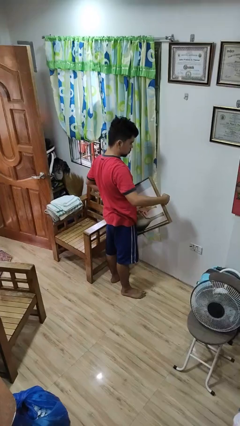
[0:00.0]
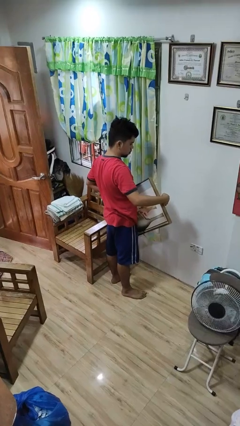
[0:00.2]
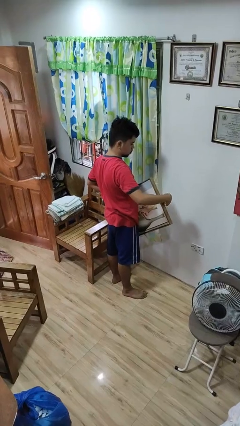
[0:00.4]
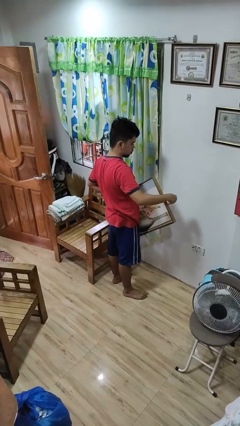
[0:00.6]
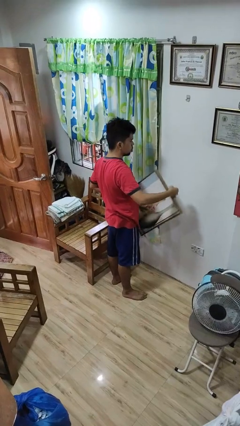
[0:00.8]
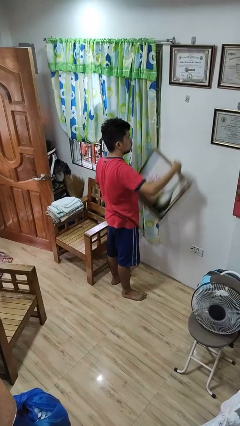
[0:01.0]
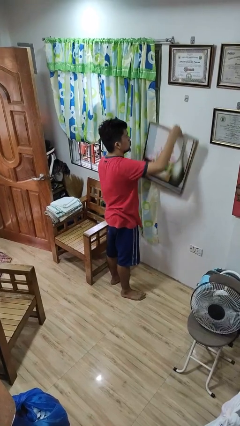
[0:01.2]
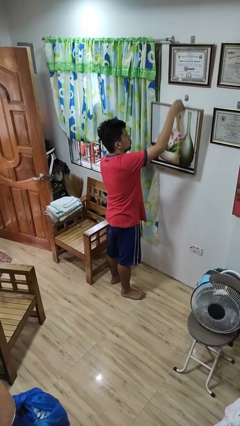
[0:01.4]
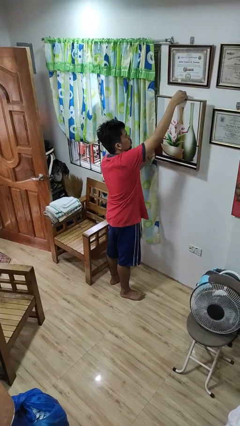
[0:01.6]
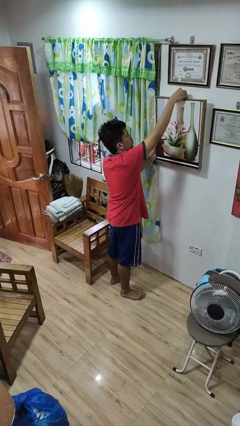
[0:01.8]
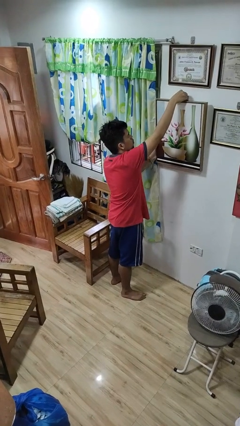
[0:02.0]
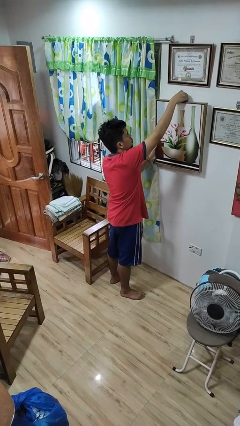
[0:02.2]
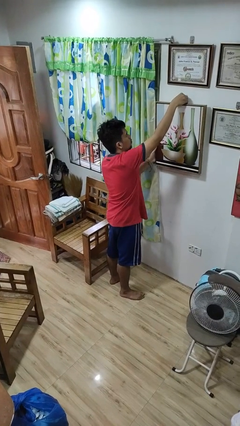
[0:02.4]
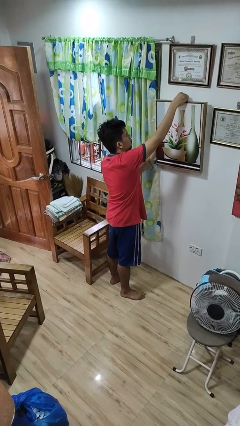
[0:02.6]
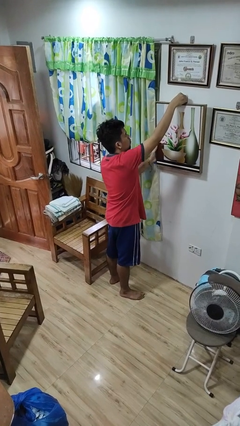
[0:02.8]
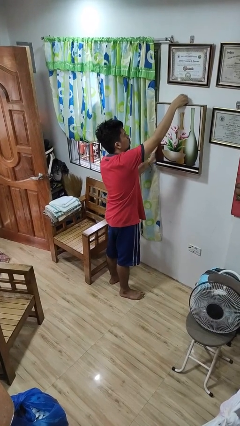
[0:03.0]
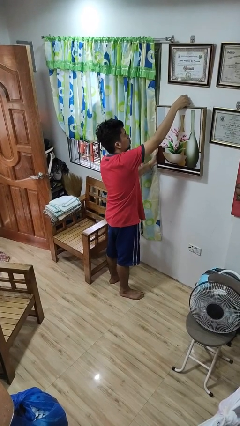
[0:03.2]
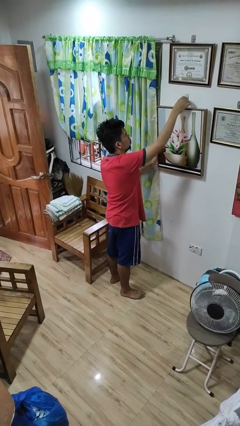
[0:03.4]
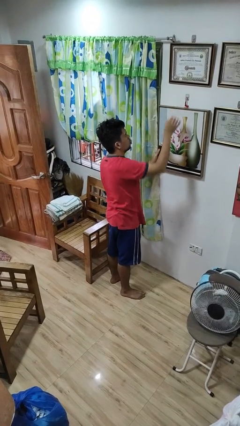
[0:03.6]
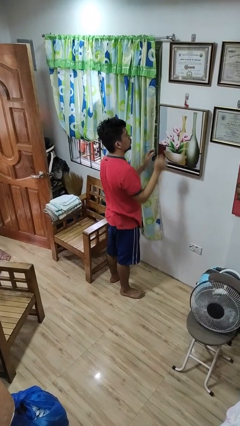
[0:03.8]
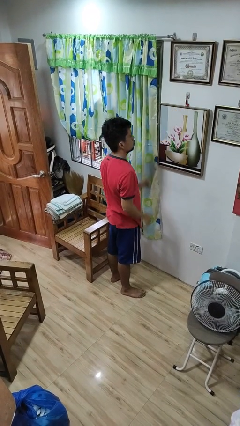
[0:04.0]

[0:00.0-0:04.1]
person puts up picture frame

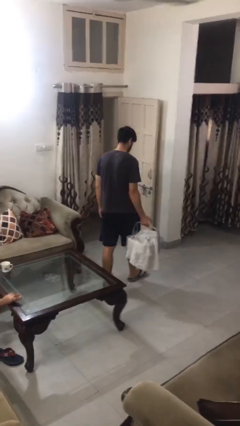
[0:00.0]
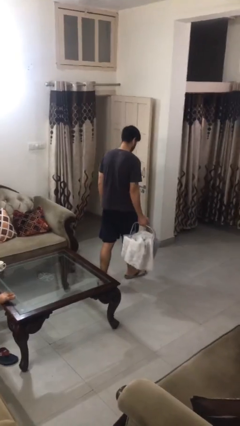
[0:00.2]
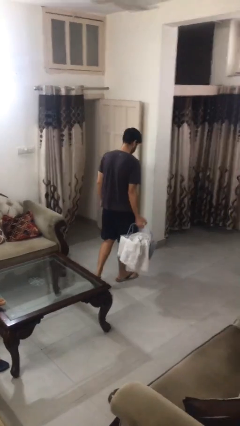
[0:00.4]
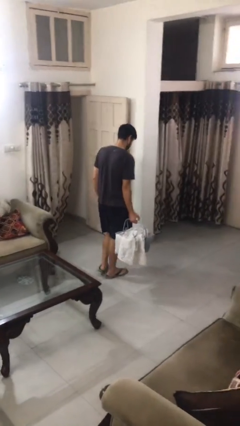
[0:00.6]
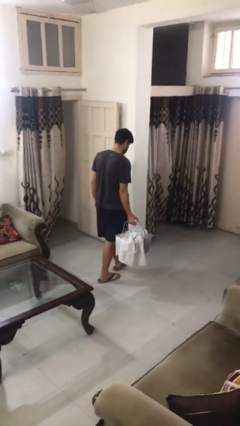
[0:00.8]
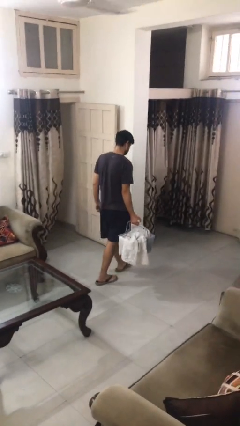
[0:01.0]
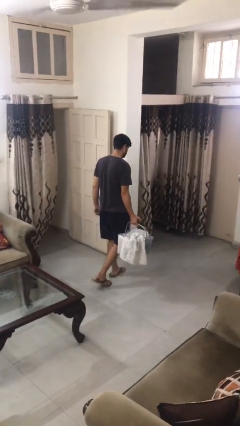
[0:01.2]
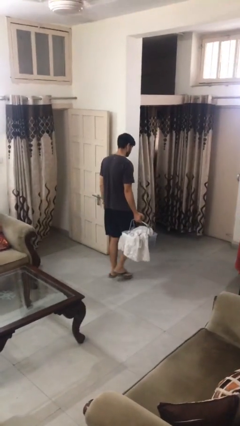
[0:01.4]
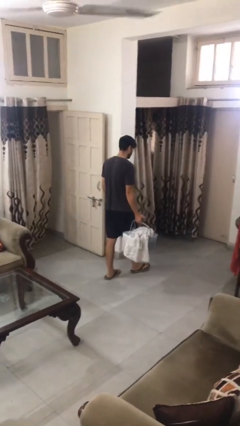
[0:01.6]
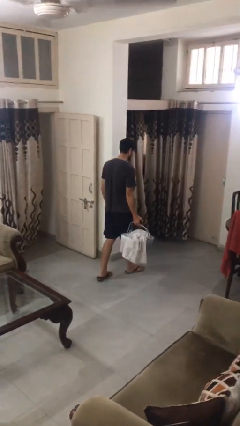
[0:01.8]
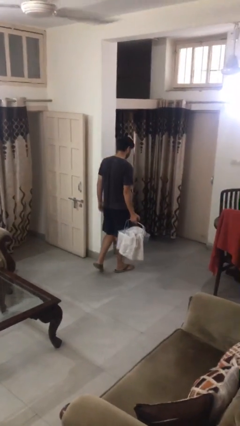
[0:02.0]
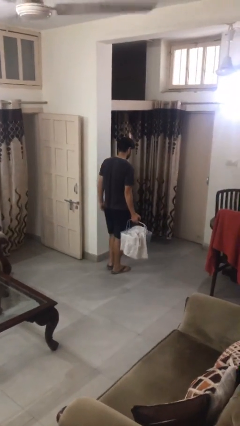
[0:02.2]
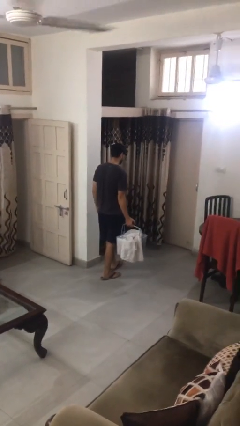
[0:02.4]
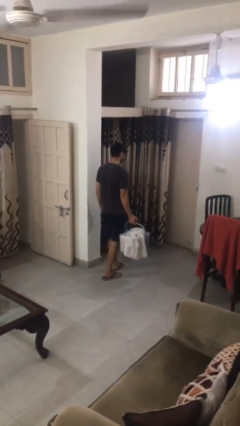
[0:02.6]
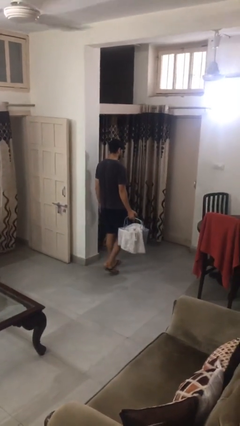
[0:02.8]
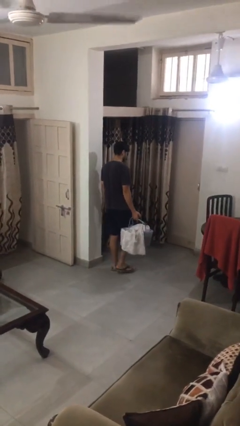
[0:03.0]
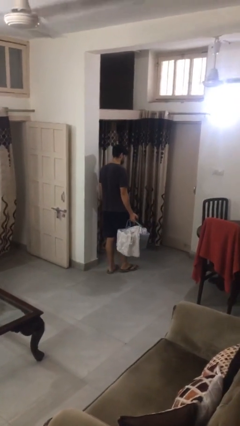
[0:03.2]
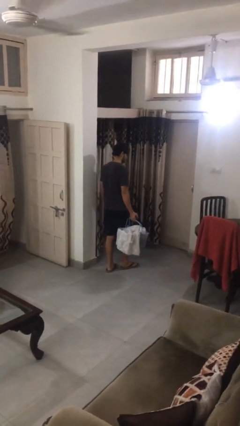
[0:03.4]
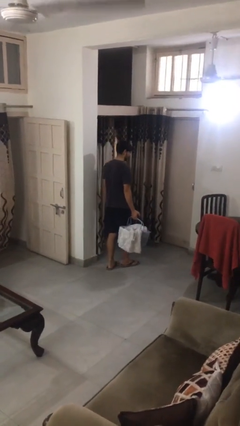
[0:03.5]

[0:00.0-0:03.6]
person carries laundry basket

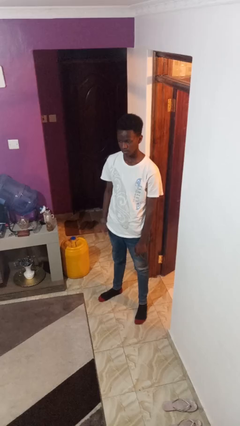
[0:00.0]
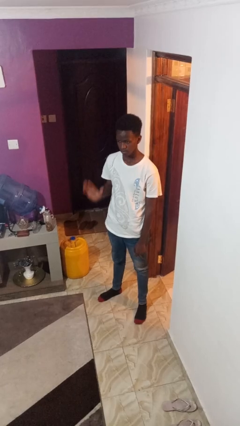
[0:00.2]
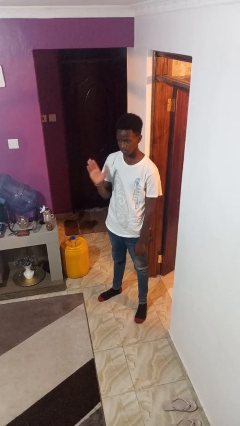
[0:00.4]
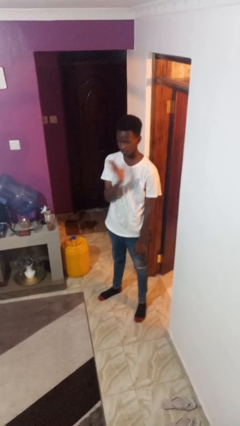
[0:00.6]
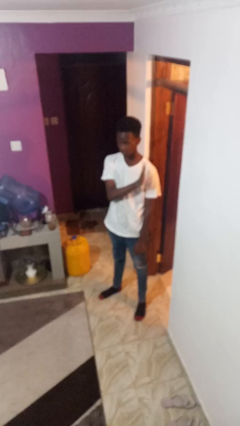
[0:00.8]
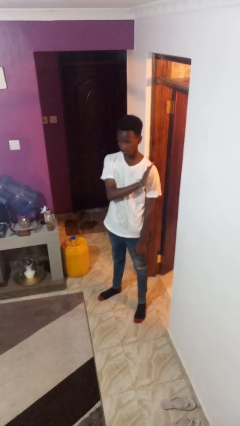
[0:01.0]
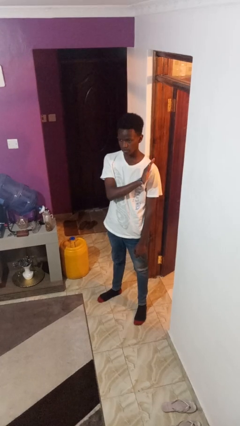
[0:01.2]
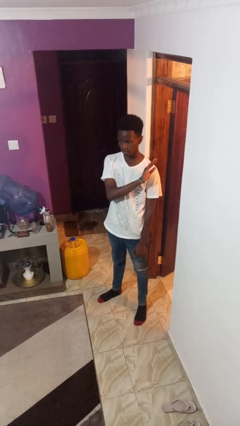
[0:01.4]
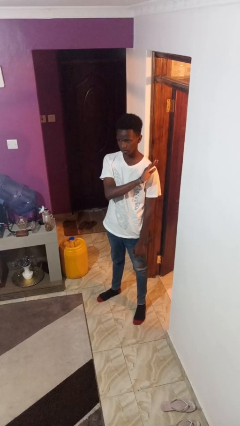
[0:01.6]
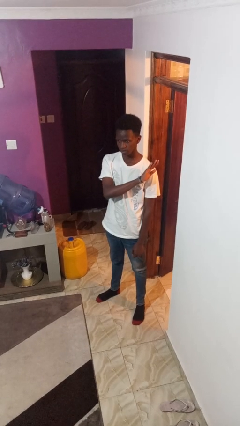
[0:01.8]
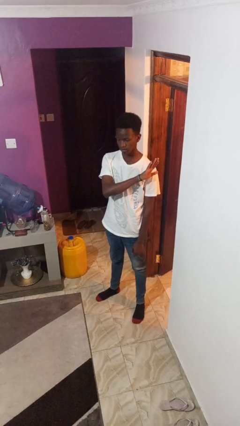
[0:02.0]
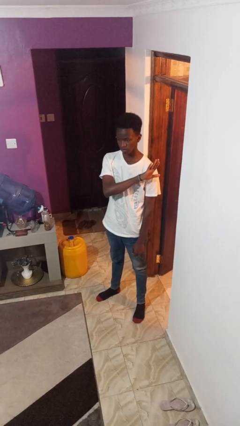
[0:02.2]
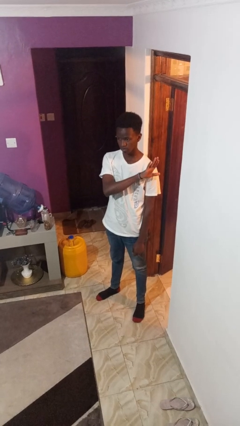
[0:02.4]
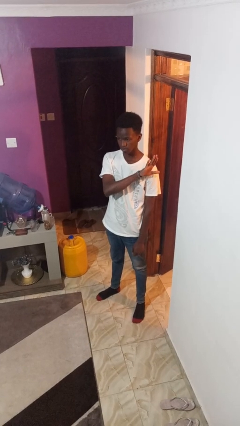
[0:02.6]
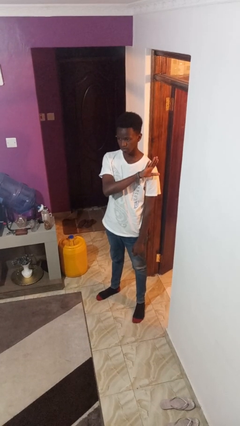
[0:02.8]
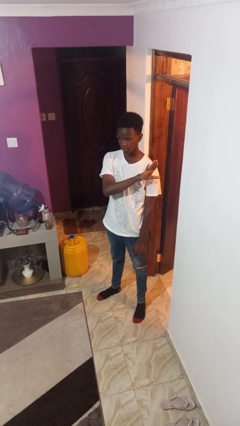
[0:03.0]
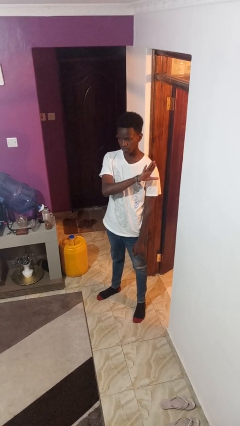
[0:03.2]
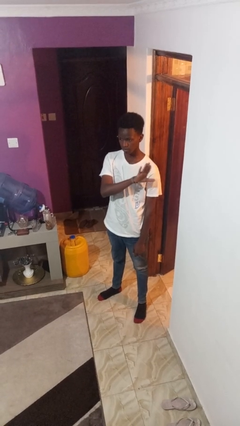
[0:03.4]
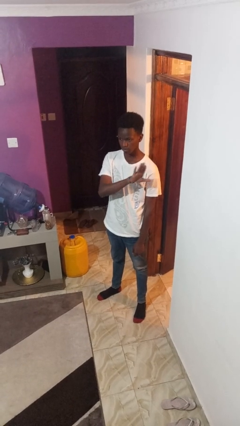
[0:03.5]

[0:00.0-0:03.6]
person gestures swipe left

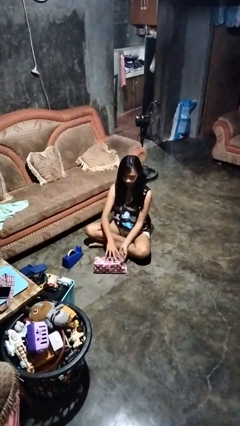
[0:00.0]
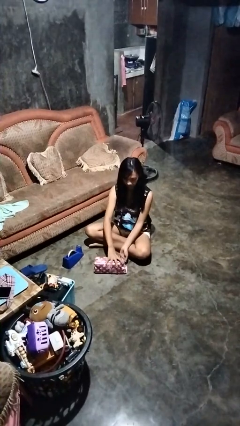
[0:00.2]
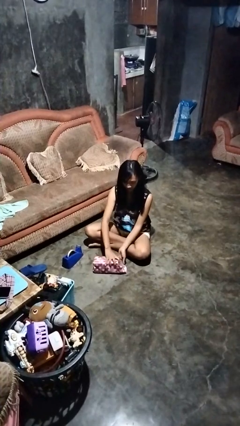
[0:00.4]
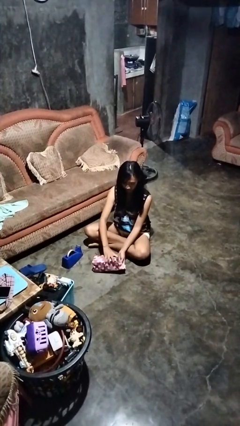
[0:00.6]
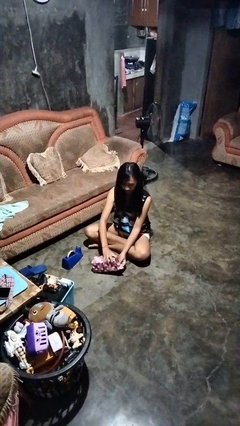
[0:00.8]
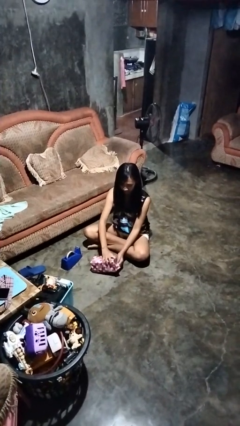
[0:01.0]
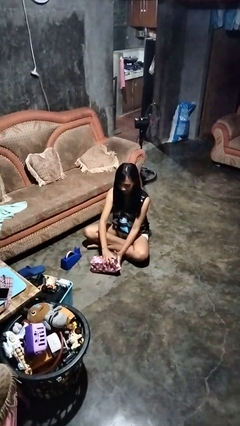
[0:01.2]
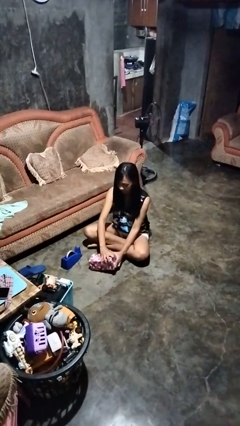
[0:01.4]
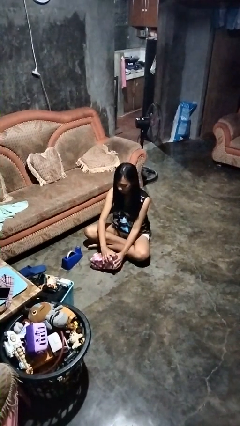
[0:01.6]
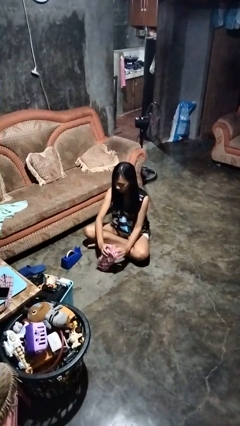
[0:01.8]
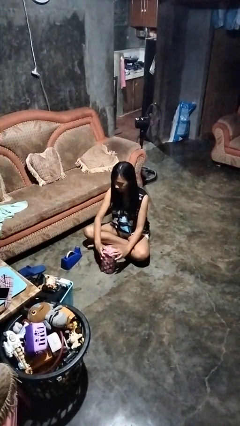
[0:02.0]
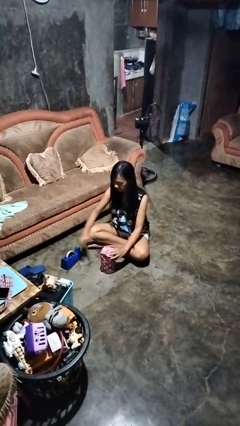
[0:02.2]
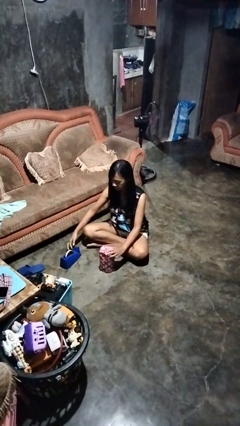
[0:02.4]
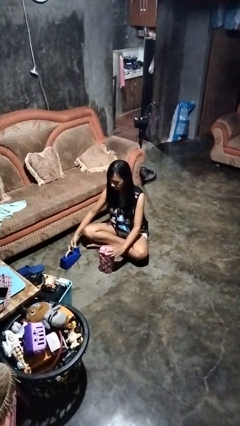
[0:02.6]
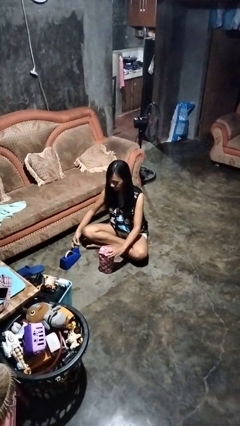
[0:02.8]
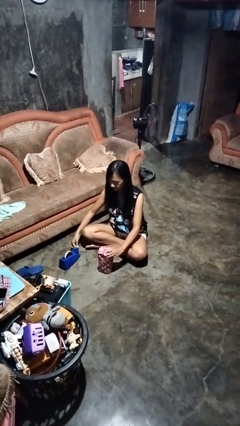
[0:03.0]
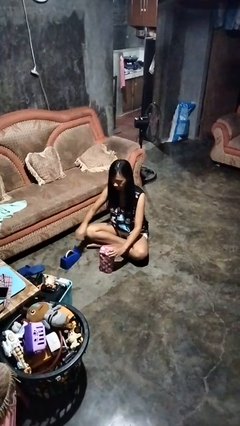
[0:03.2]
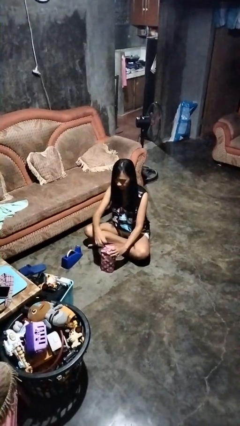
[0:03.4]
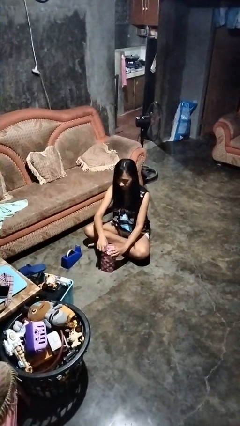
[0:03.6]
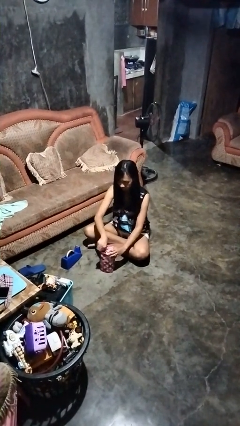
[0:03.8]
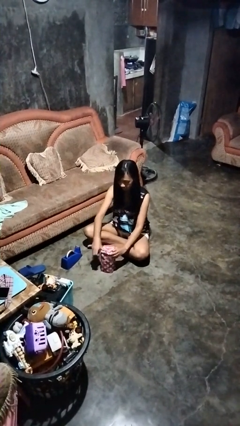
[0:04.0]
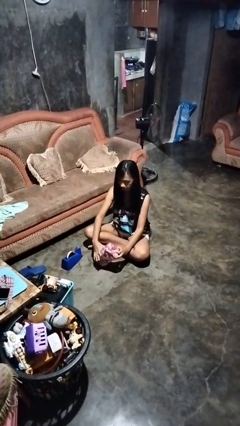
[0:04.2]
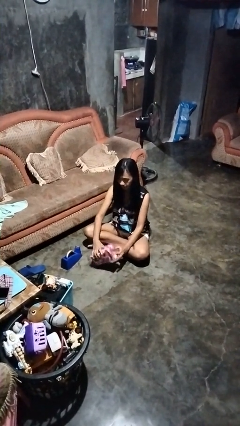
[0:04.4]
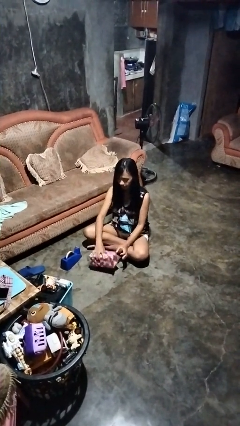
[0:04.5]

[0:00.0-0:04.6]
person wraps box

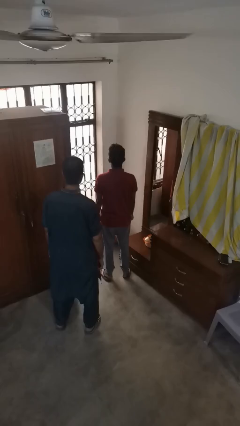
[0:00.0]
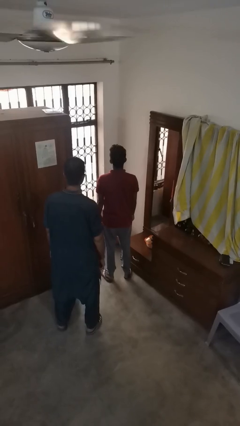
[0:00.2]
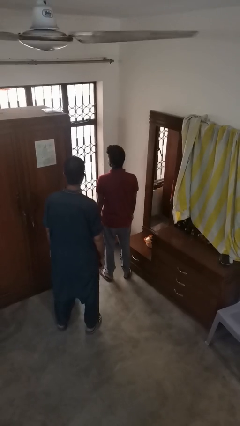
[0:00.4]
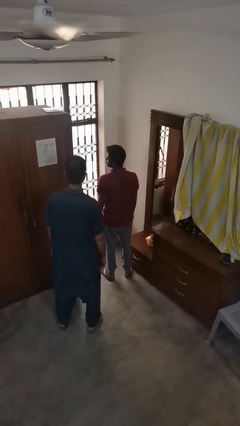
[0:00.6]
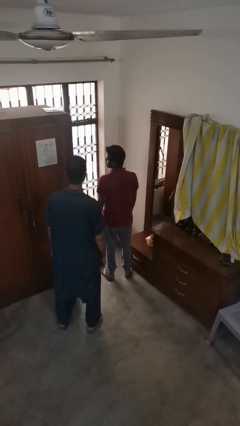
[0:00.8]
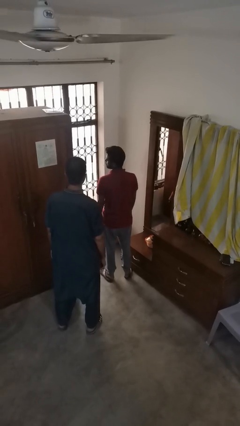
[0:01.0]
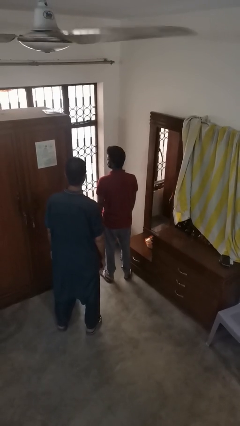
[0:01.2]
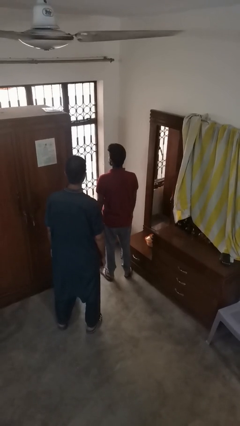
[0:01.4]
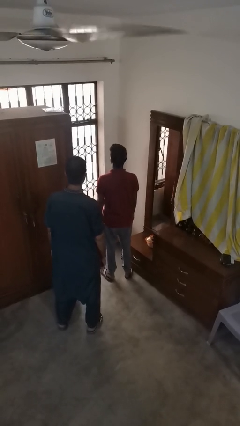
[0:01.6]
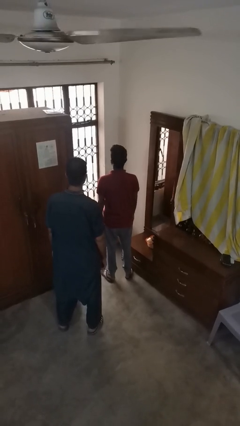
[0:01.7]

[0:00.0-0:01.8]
person looks over shoulder
